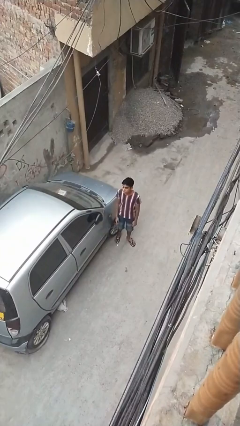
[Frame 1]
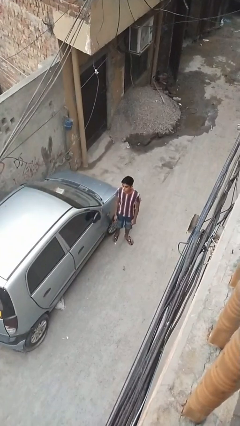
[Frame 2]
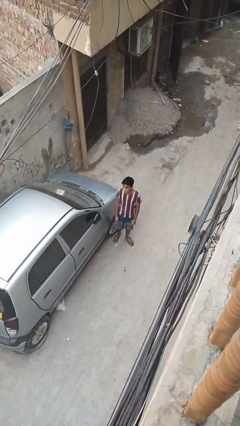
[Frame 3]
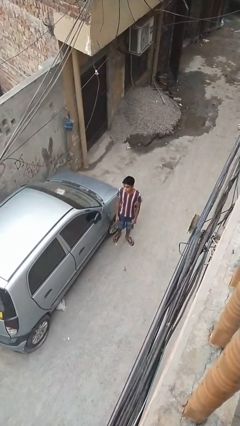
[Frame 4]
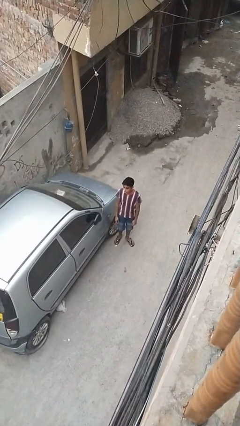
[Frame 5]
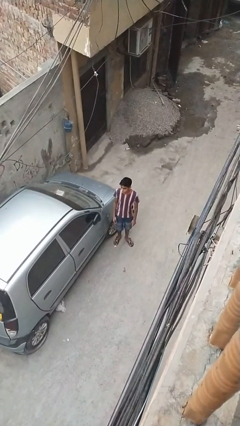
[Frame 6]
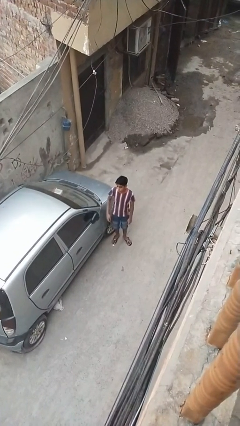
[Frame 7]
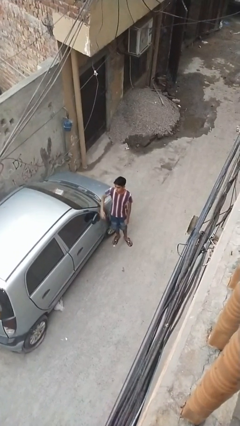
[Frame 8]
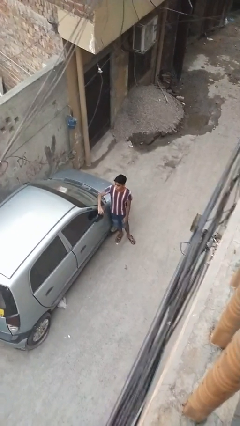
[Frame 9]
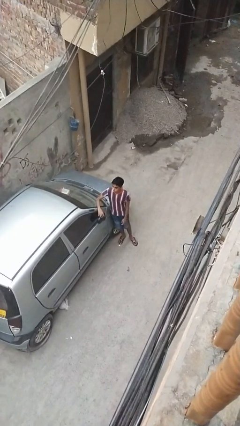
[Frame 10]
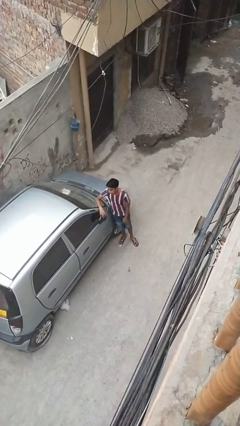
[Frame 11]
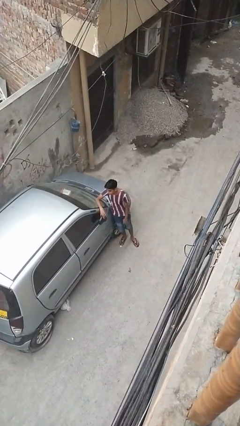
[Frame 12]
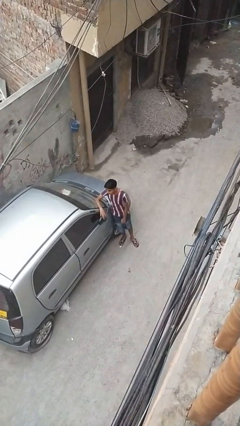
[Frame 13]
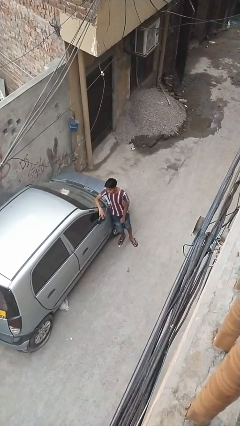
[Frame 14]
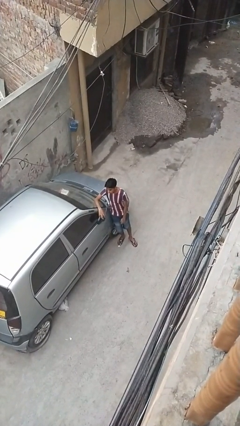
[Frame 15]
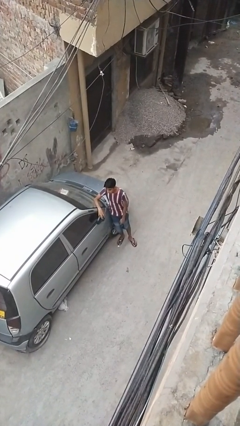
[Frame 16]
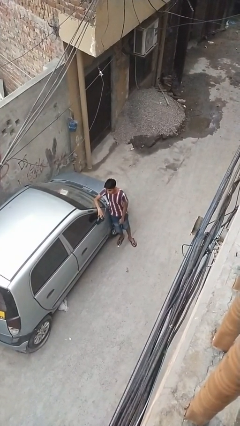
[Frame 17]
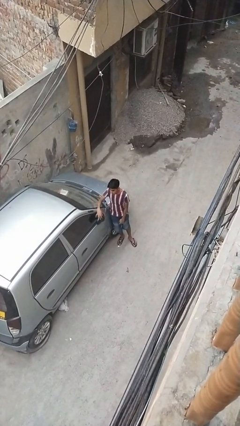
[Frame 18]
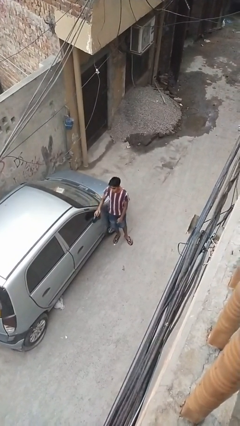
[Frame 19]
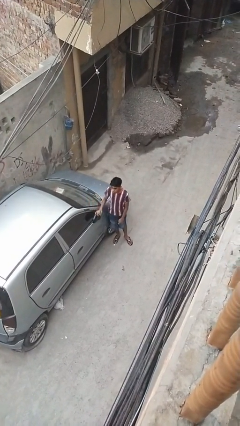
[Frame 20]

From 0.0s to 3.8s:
person leans against car

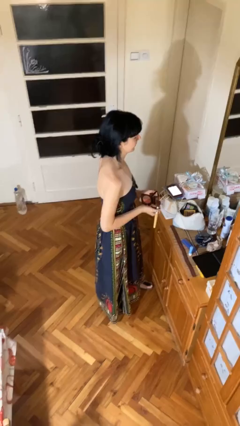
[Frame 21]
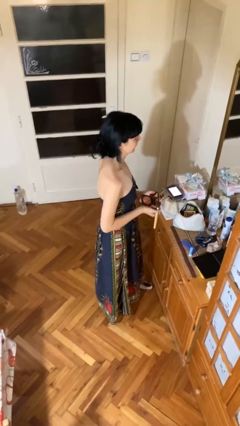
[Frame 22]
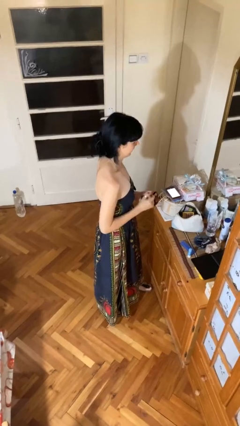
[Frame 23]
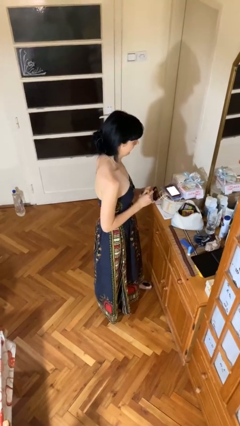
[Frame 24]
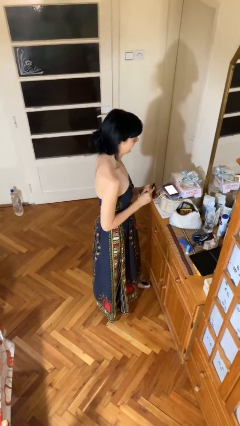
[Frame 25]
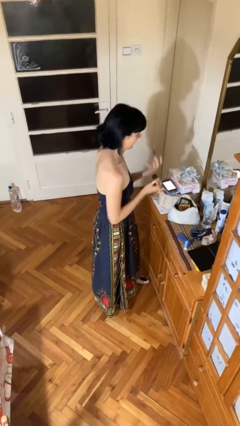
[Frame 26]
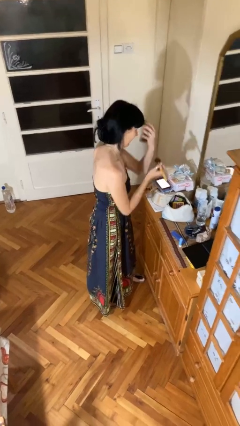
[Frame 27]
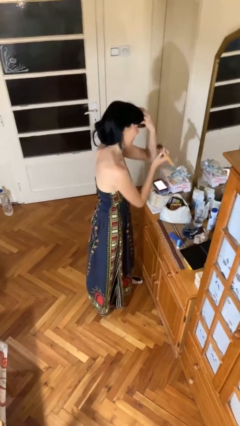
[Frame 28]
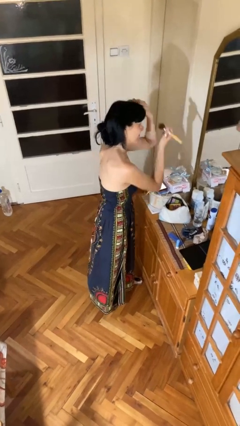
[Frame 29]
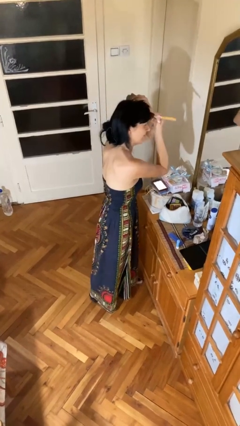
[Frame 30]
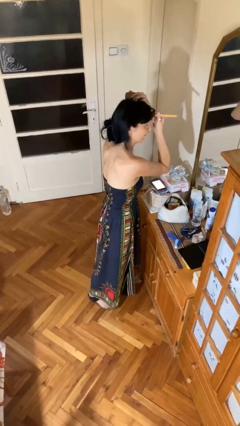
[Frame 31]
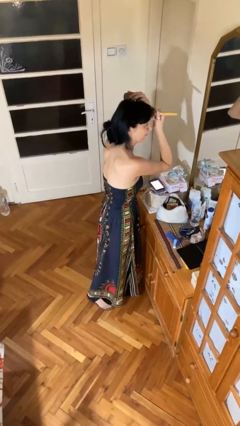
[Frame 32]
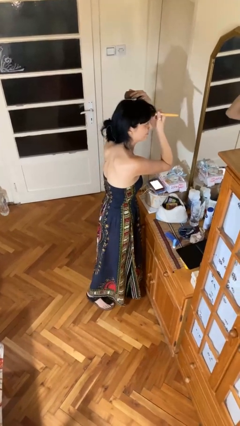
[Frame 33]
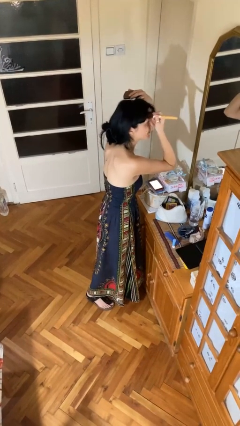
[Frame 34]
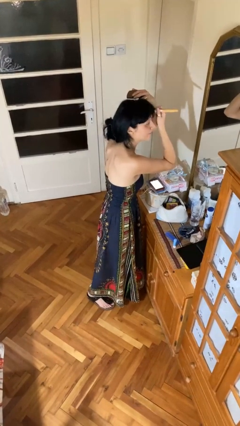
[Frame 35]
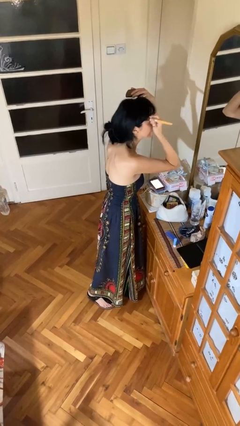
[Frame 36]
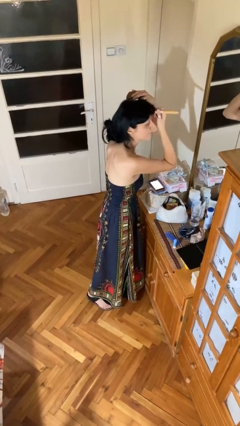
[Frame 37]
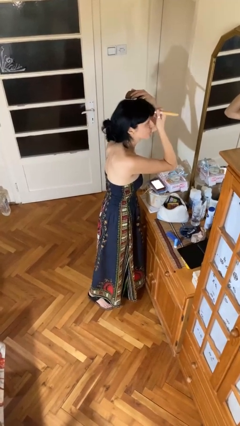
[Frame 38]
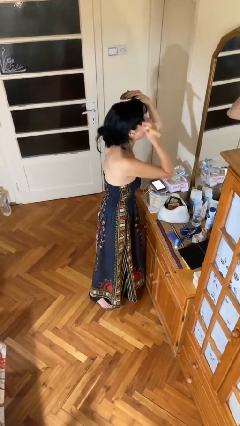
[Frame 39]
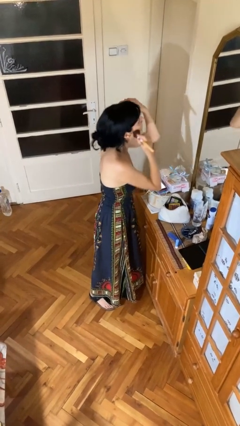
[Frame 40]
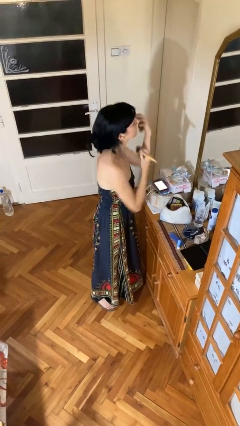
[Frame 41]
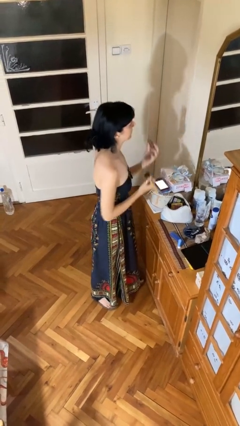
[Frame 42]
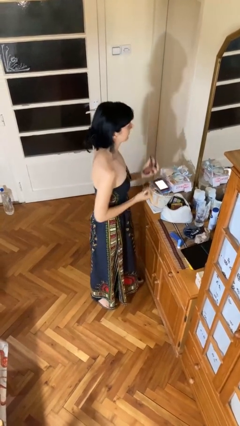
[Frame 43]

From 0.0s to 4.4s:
person applies foundation makeup

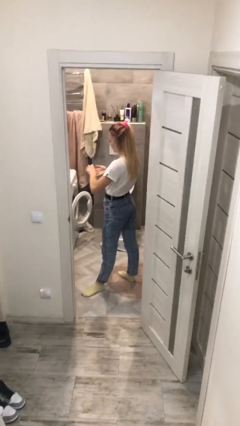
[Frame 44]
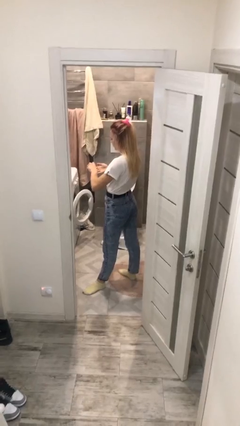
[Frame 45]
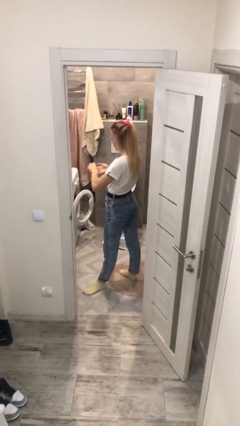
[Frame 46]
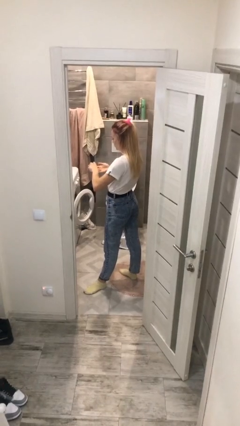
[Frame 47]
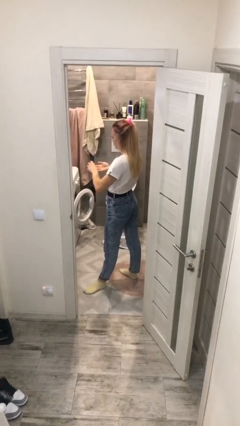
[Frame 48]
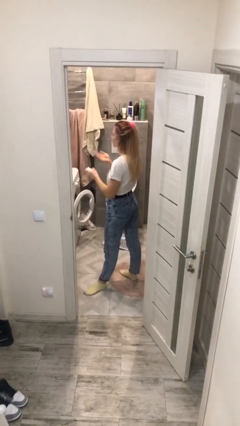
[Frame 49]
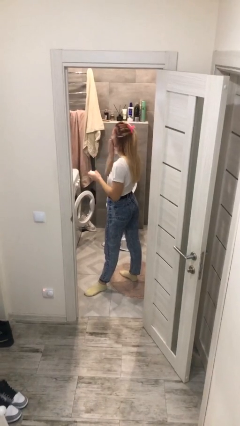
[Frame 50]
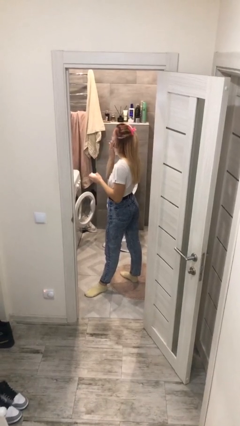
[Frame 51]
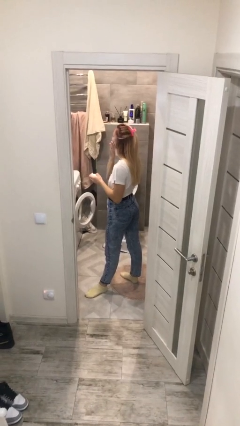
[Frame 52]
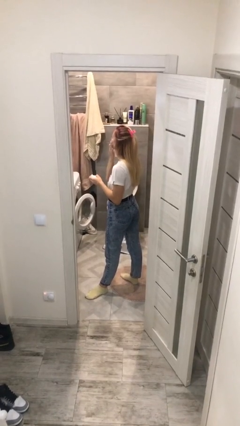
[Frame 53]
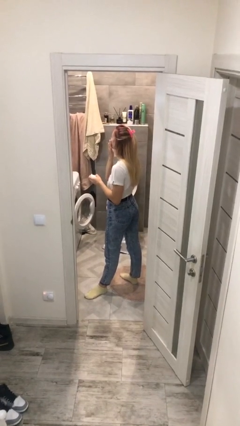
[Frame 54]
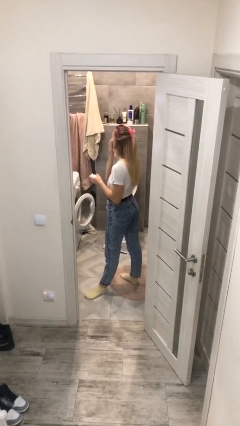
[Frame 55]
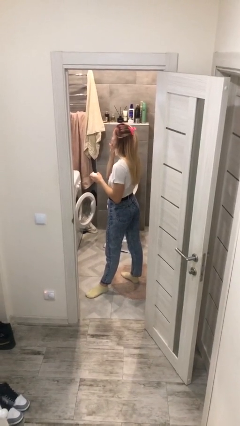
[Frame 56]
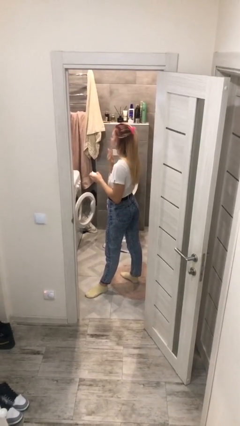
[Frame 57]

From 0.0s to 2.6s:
person applies facial moisturizer

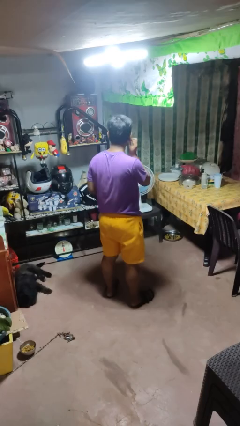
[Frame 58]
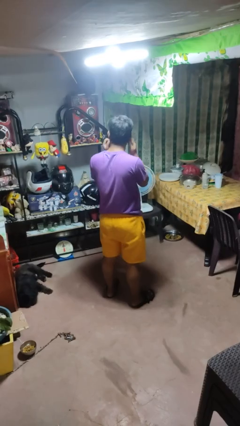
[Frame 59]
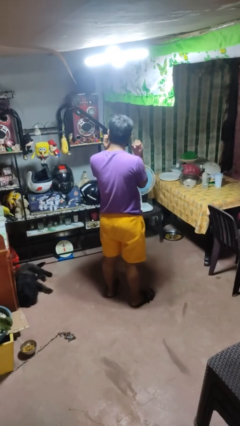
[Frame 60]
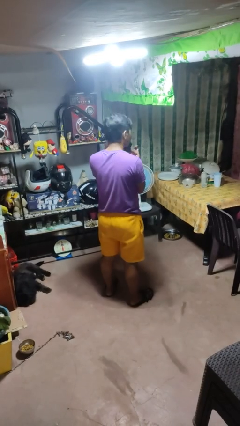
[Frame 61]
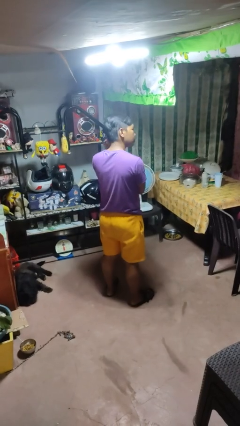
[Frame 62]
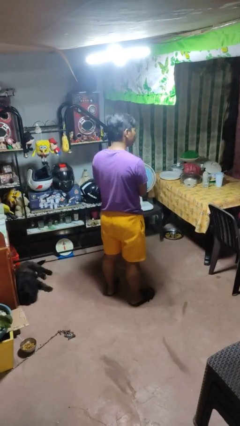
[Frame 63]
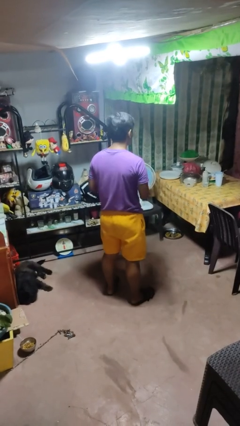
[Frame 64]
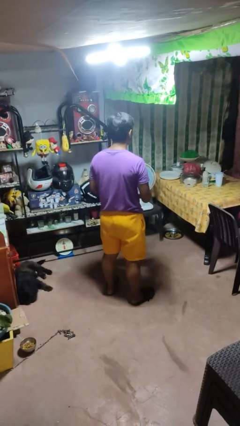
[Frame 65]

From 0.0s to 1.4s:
person takes off facemask

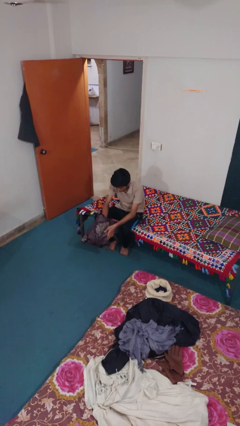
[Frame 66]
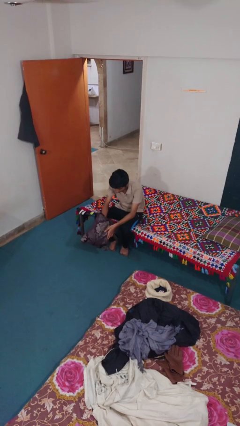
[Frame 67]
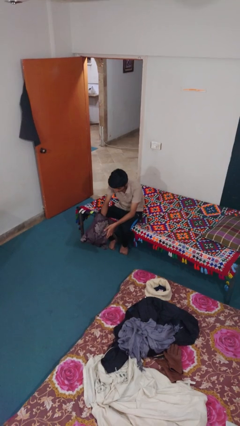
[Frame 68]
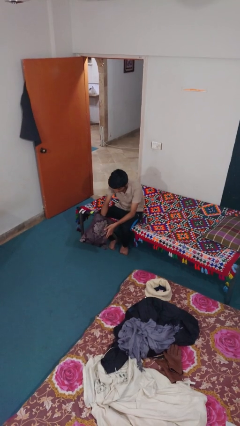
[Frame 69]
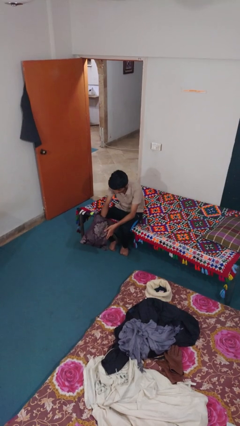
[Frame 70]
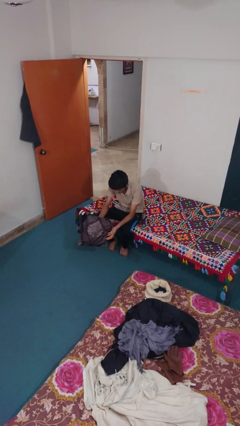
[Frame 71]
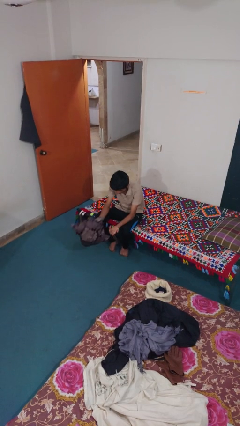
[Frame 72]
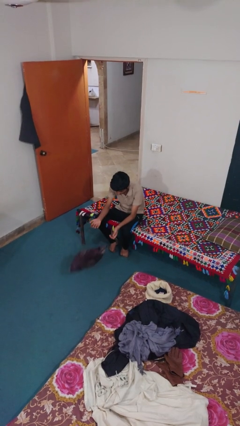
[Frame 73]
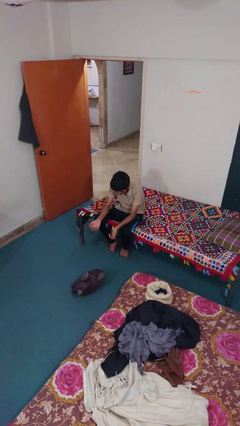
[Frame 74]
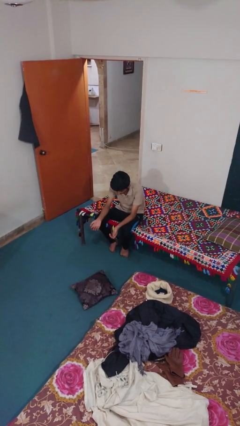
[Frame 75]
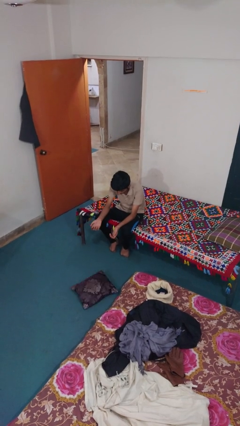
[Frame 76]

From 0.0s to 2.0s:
person drops object

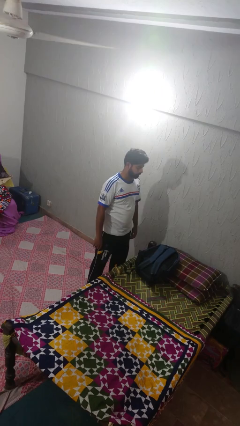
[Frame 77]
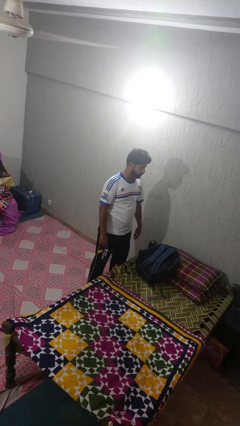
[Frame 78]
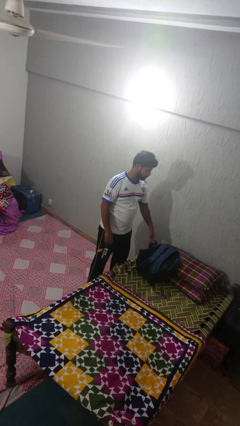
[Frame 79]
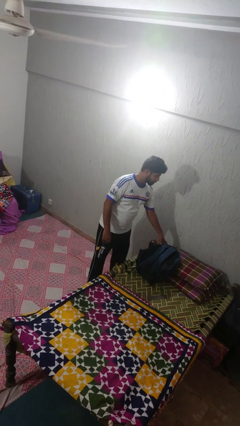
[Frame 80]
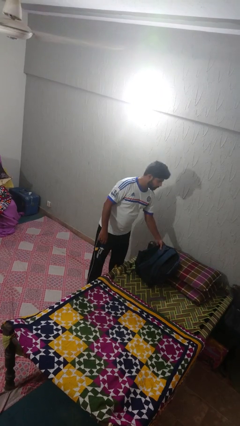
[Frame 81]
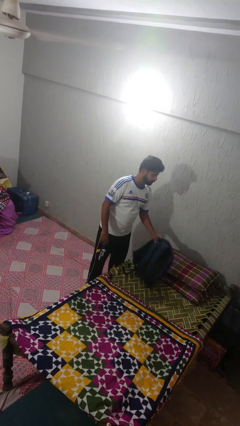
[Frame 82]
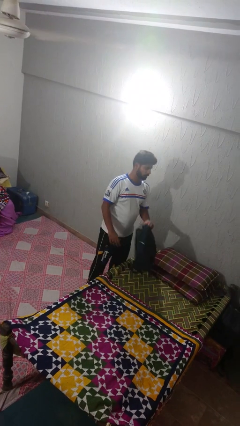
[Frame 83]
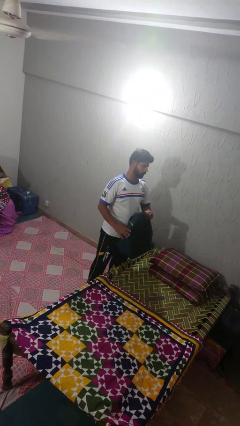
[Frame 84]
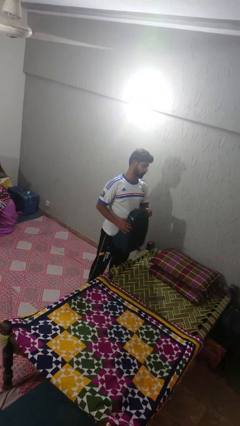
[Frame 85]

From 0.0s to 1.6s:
person picks up object from bed

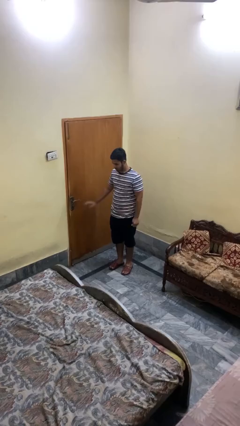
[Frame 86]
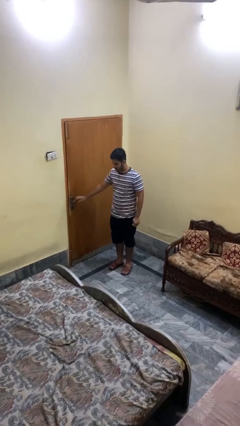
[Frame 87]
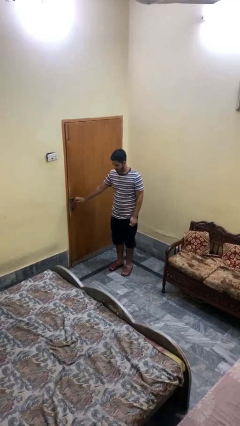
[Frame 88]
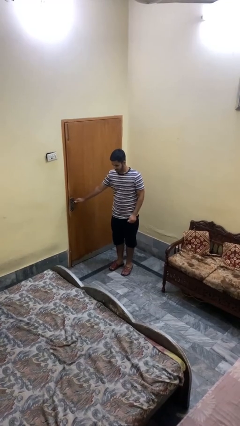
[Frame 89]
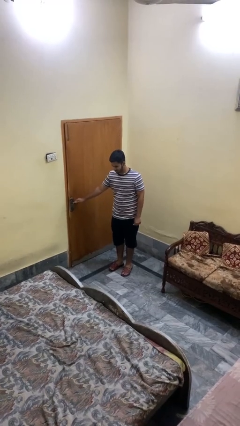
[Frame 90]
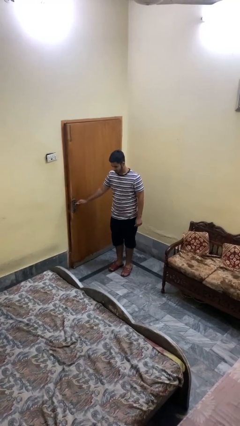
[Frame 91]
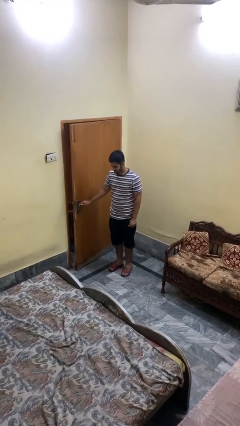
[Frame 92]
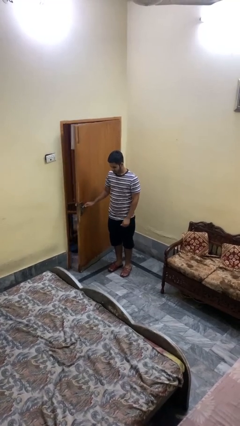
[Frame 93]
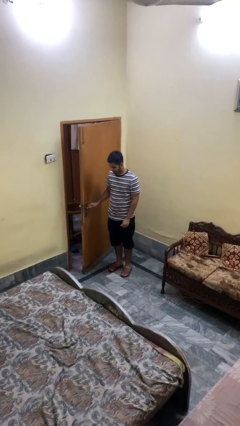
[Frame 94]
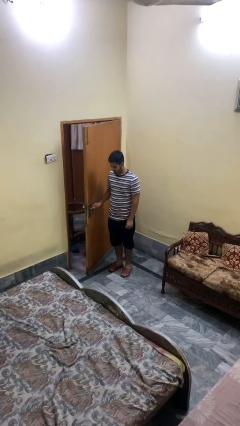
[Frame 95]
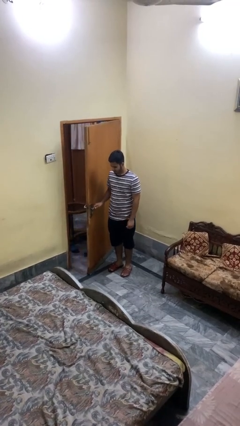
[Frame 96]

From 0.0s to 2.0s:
person opens facility door
